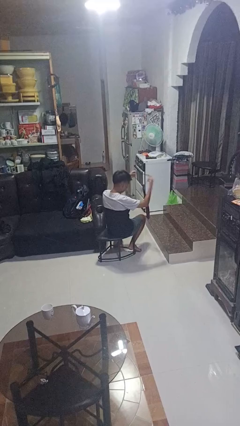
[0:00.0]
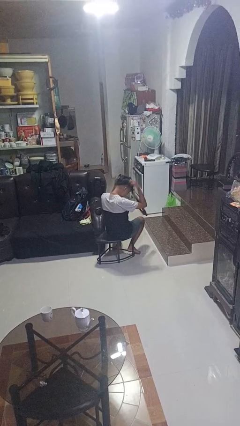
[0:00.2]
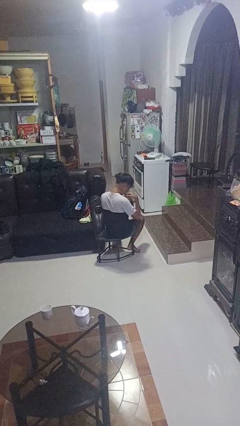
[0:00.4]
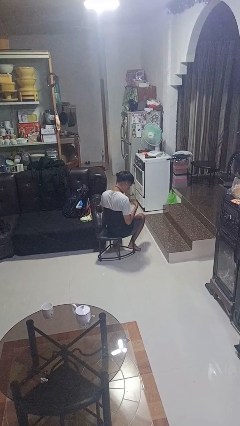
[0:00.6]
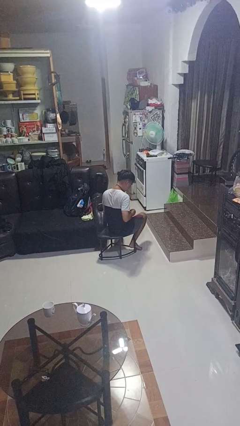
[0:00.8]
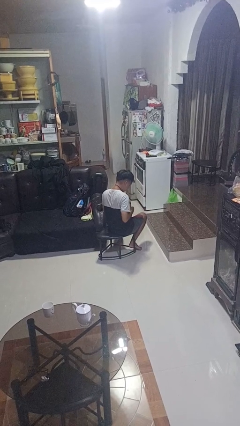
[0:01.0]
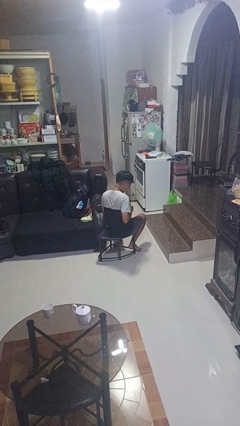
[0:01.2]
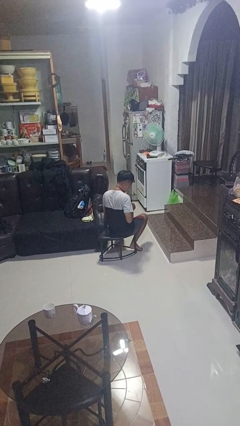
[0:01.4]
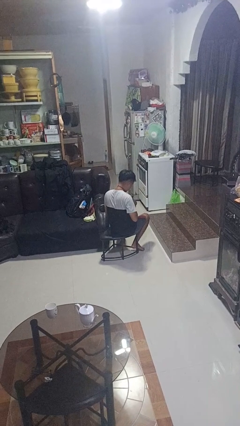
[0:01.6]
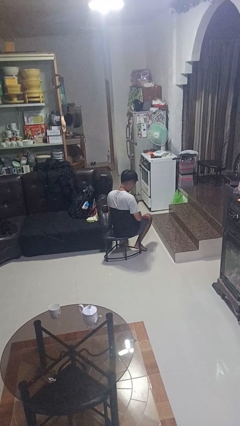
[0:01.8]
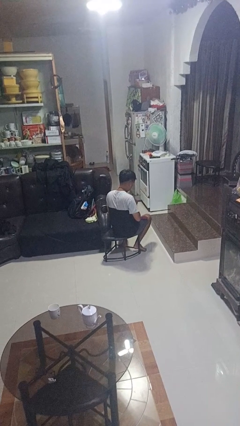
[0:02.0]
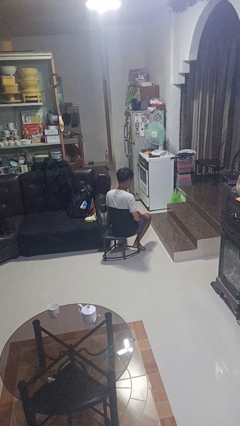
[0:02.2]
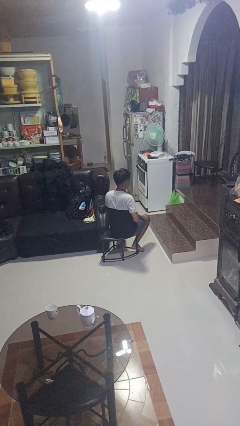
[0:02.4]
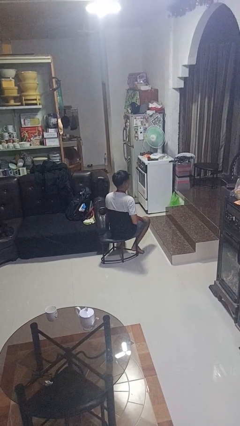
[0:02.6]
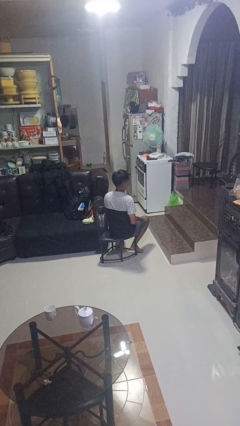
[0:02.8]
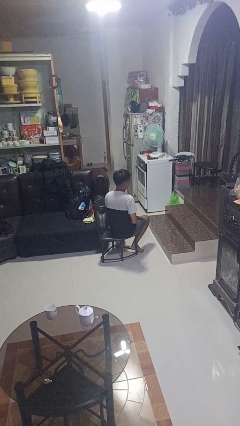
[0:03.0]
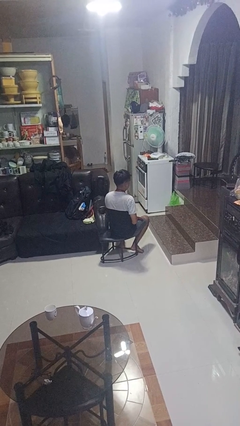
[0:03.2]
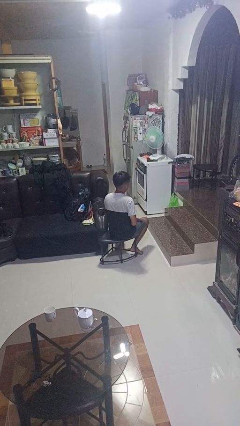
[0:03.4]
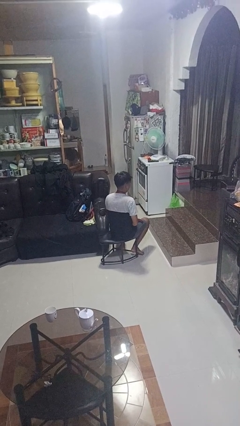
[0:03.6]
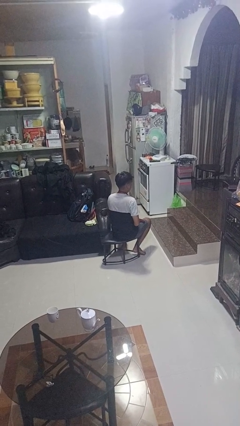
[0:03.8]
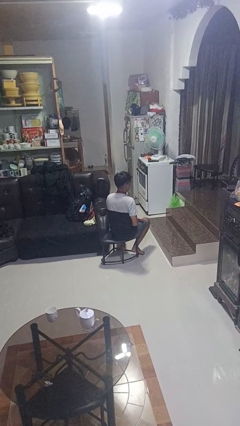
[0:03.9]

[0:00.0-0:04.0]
person puts on necktie

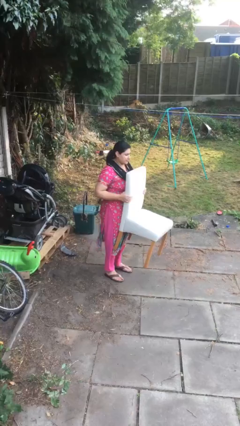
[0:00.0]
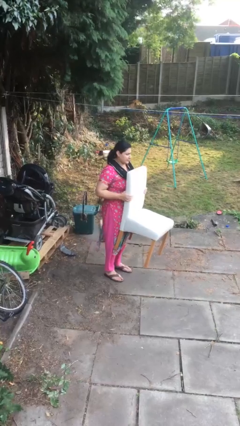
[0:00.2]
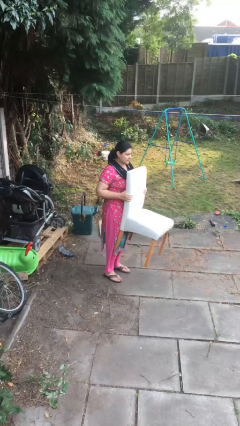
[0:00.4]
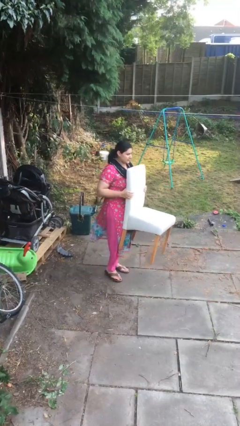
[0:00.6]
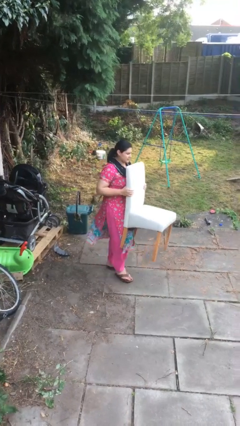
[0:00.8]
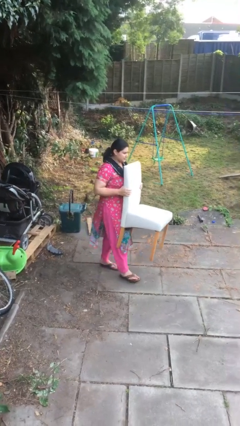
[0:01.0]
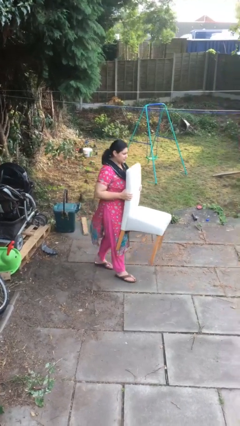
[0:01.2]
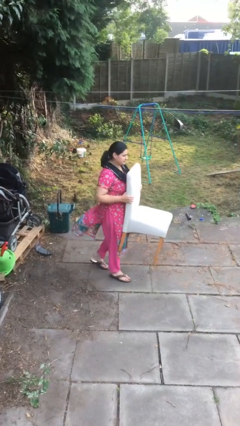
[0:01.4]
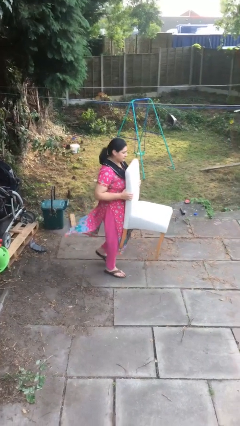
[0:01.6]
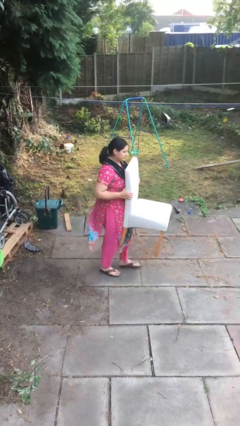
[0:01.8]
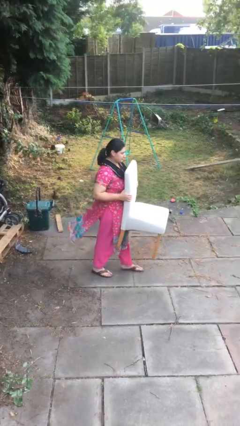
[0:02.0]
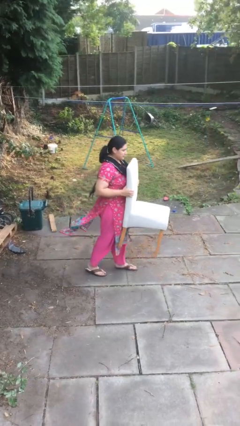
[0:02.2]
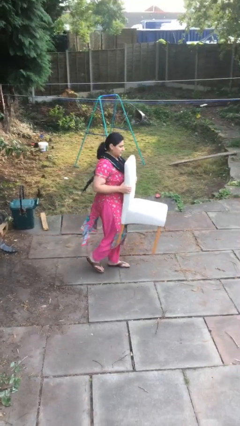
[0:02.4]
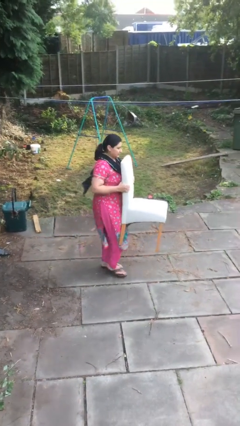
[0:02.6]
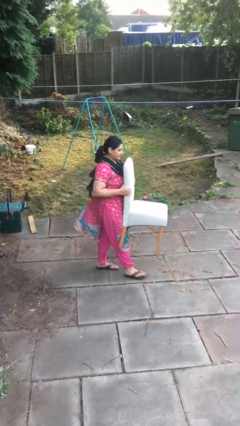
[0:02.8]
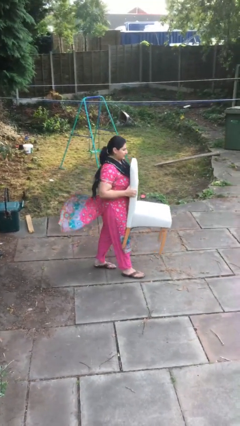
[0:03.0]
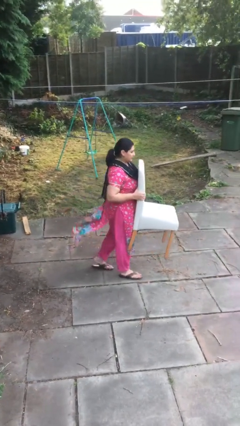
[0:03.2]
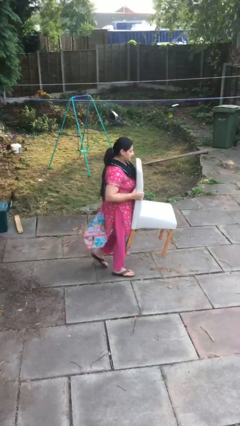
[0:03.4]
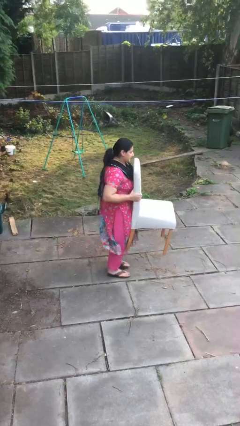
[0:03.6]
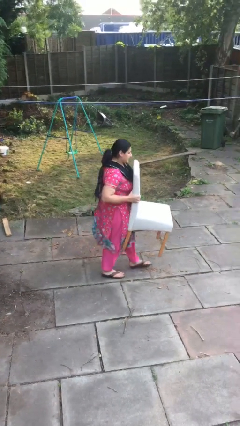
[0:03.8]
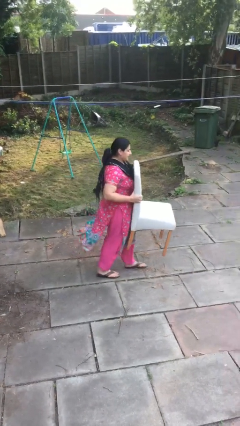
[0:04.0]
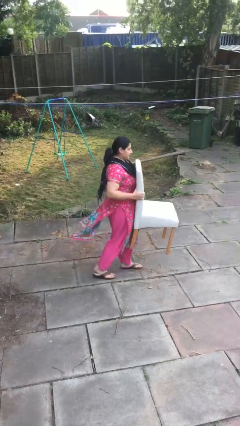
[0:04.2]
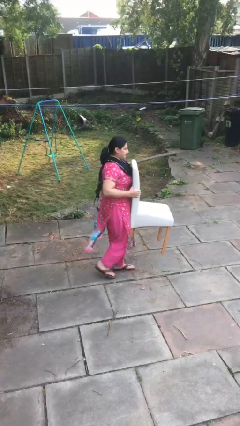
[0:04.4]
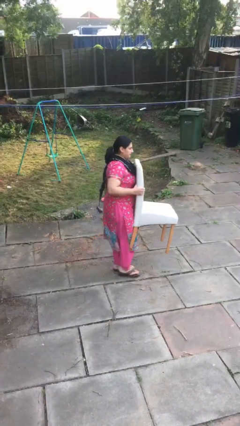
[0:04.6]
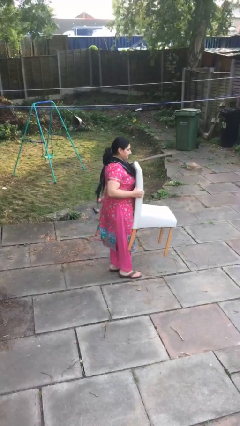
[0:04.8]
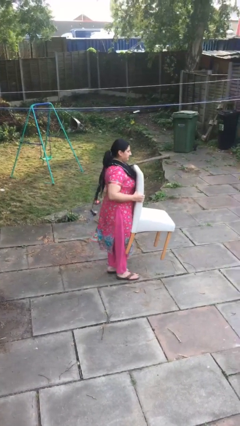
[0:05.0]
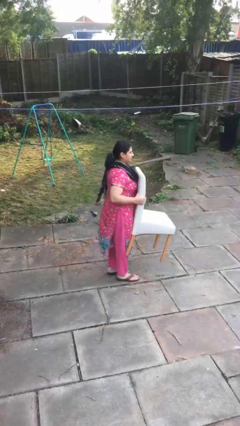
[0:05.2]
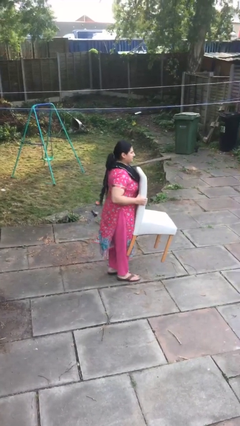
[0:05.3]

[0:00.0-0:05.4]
person carries heavy object

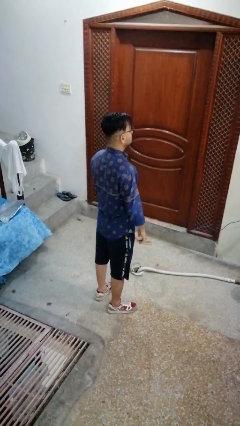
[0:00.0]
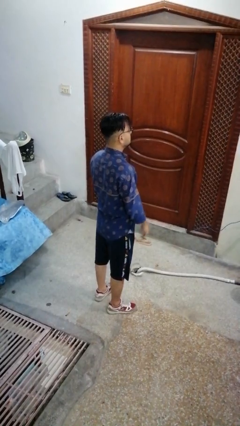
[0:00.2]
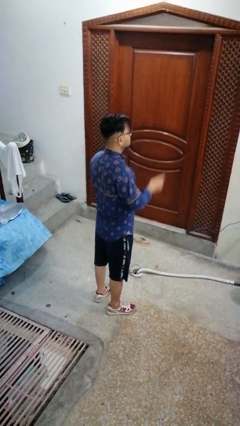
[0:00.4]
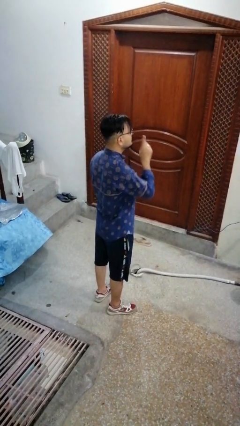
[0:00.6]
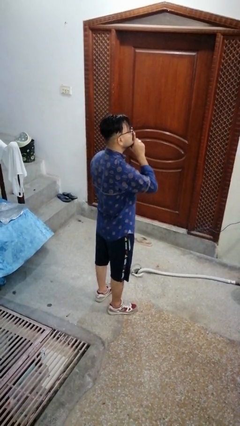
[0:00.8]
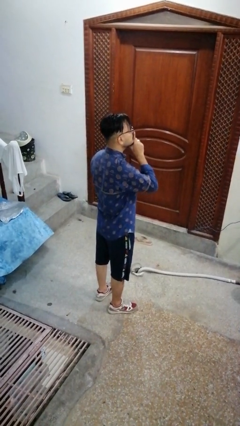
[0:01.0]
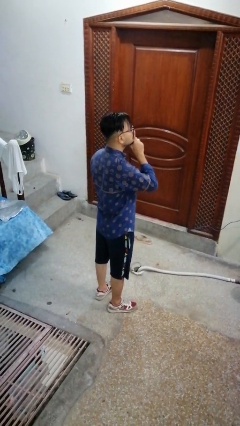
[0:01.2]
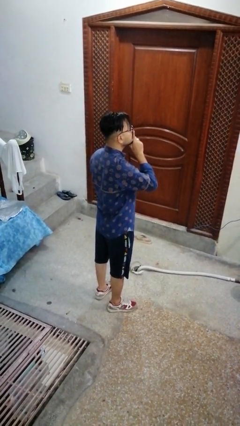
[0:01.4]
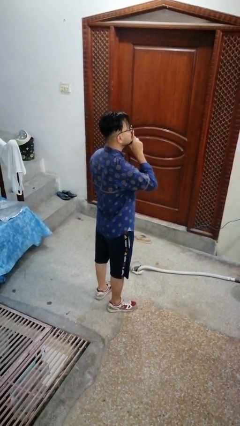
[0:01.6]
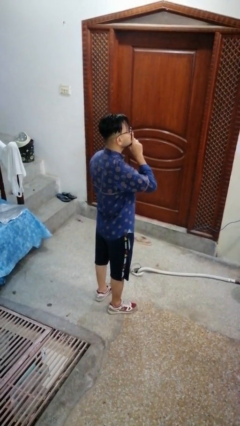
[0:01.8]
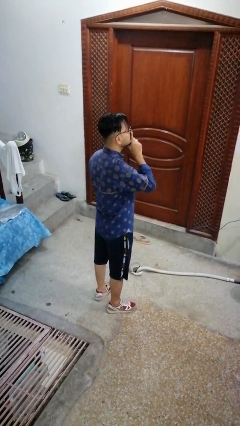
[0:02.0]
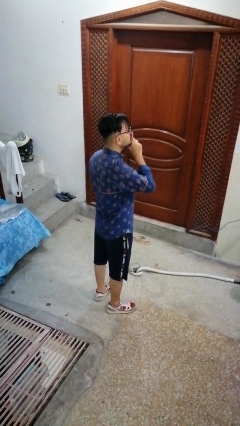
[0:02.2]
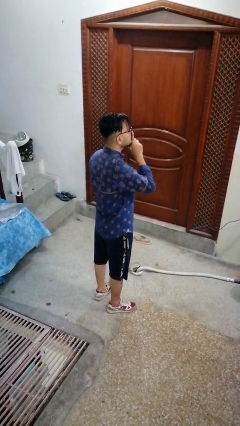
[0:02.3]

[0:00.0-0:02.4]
person gestures be quiet

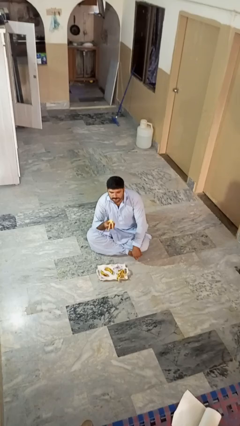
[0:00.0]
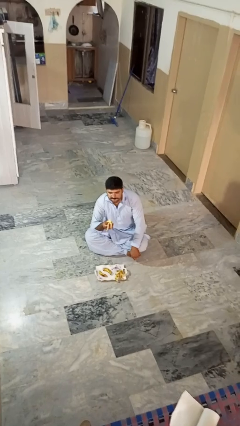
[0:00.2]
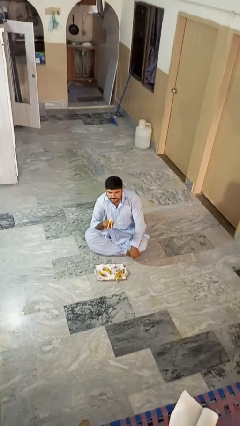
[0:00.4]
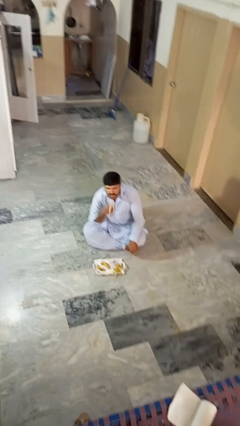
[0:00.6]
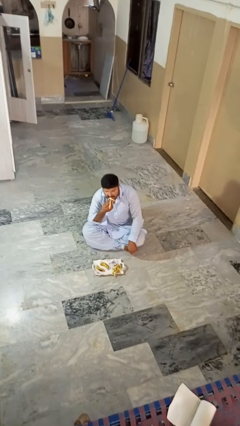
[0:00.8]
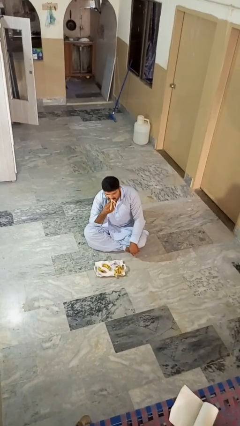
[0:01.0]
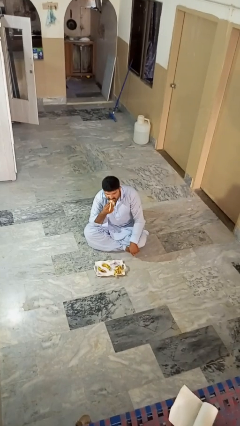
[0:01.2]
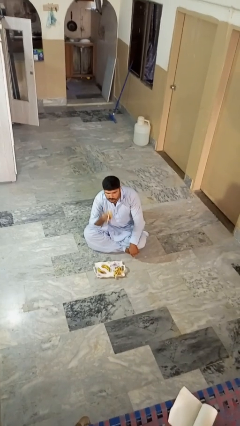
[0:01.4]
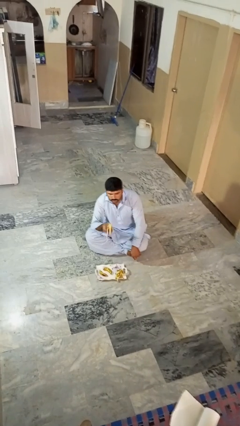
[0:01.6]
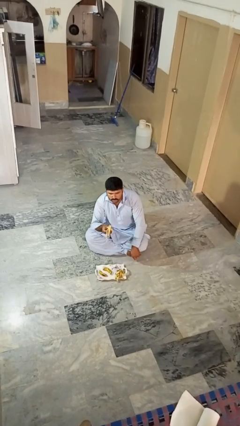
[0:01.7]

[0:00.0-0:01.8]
person eats banana

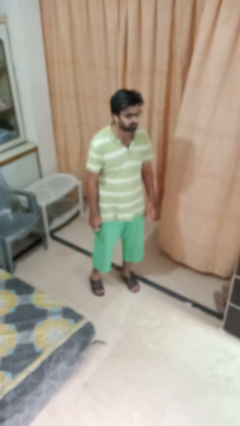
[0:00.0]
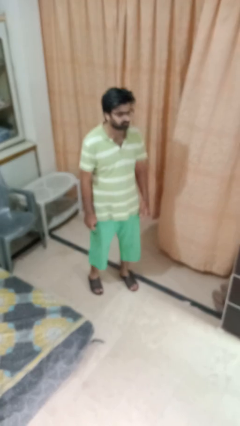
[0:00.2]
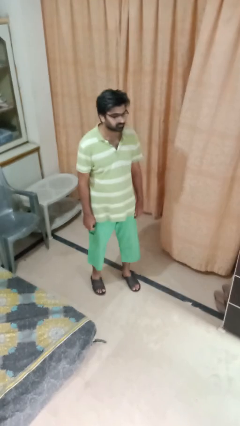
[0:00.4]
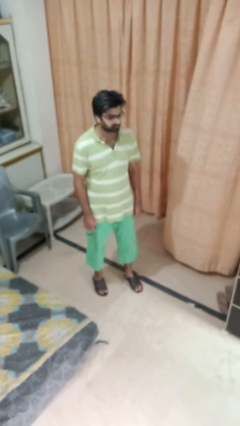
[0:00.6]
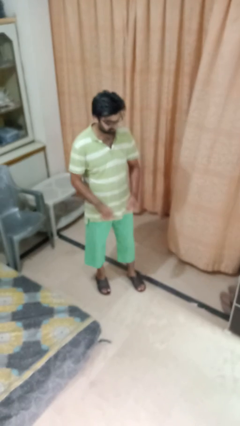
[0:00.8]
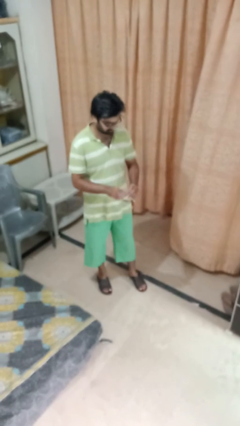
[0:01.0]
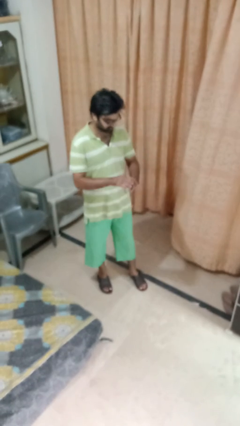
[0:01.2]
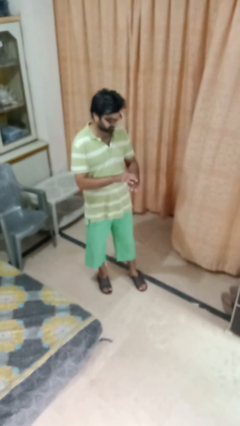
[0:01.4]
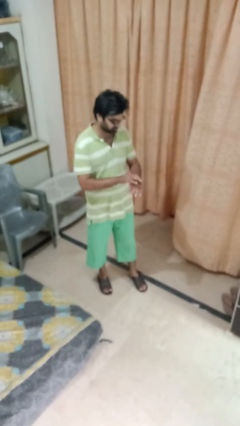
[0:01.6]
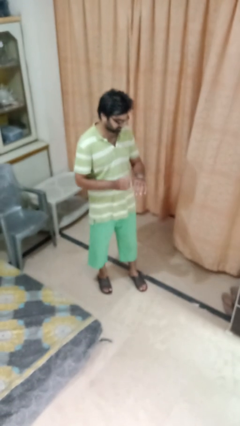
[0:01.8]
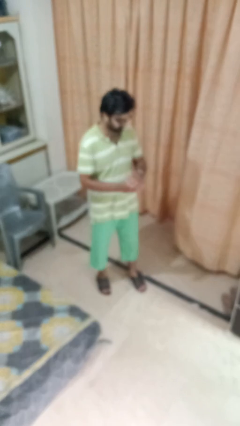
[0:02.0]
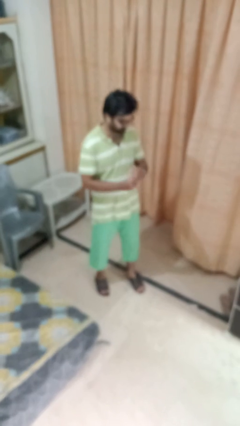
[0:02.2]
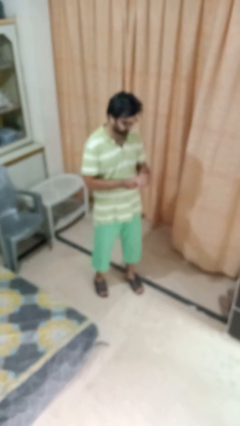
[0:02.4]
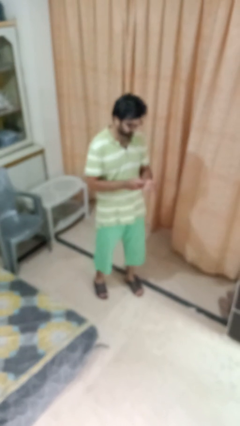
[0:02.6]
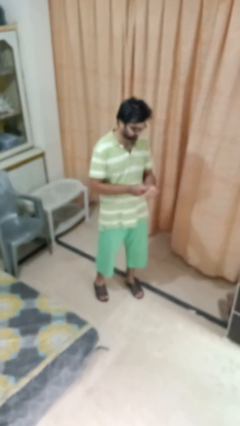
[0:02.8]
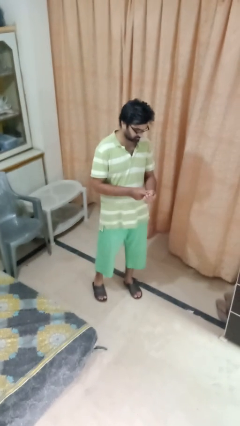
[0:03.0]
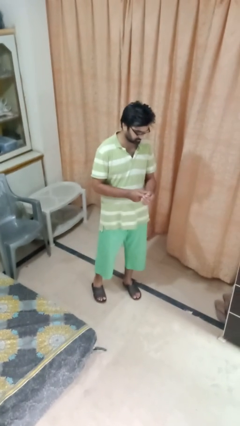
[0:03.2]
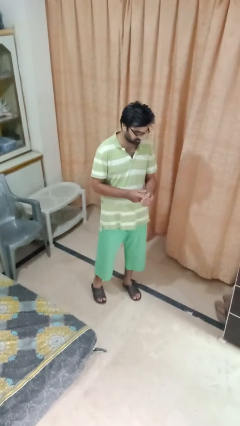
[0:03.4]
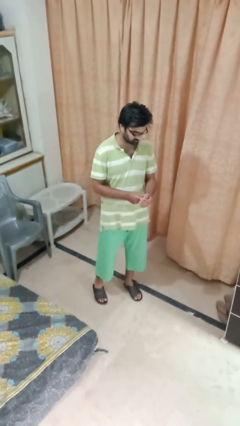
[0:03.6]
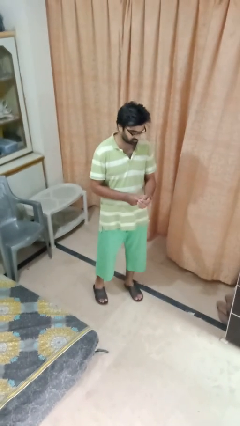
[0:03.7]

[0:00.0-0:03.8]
person puts on wristwatch

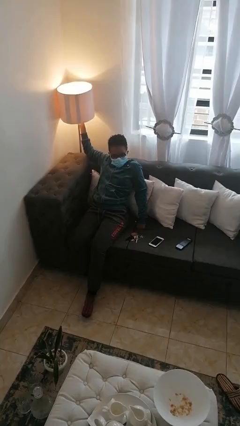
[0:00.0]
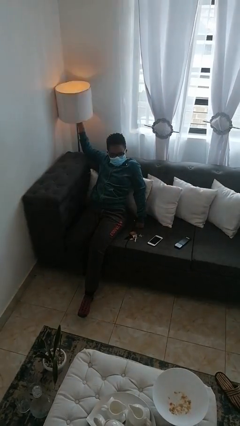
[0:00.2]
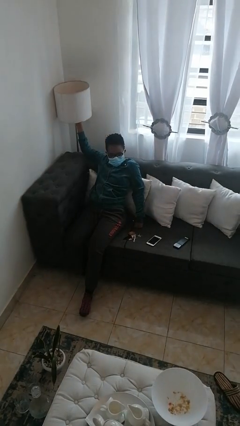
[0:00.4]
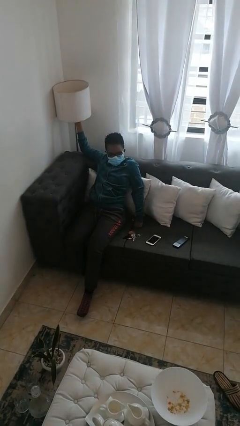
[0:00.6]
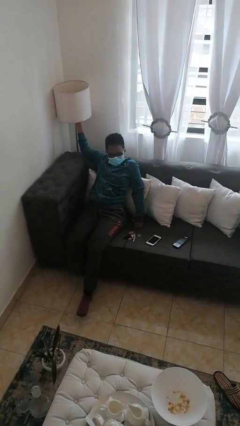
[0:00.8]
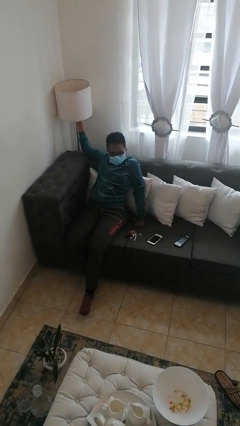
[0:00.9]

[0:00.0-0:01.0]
person turns off lamp
